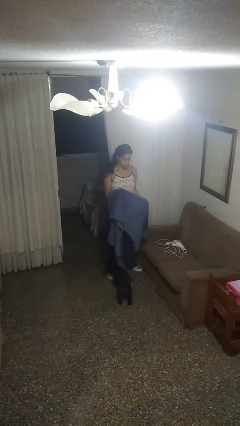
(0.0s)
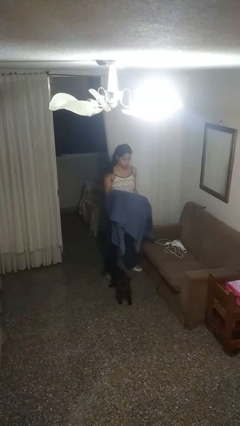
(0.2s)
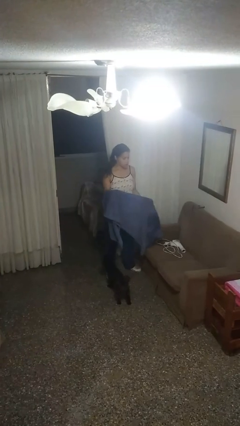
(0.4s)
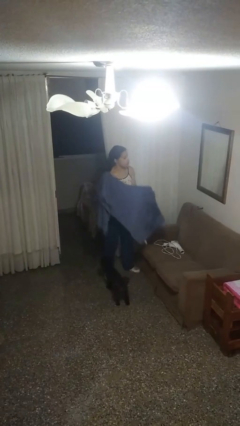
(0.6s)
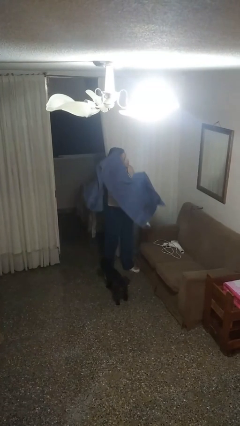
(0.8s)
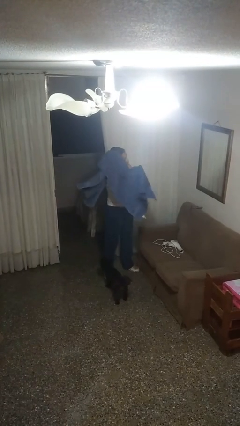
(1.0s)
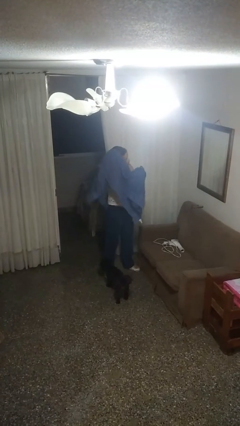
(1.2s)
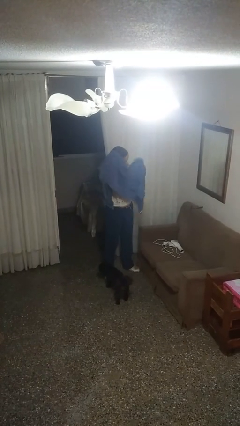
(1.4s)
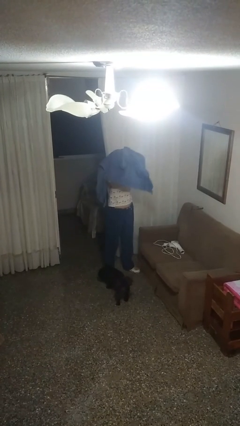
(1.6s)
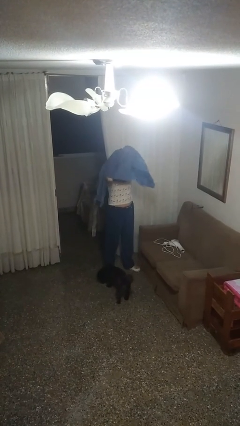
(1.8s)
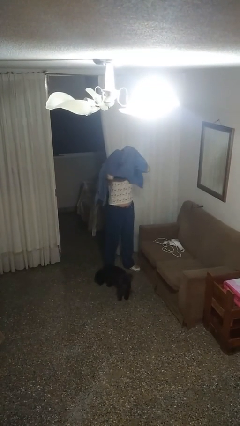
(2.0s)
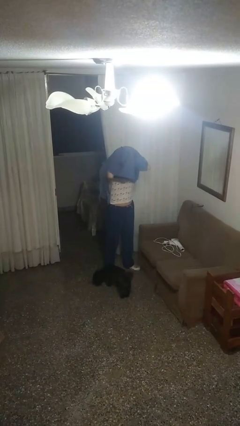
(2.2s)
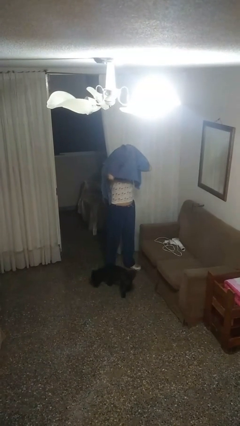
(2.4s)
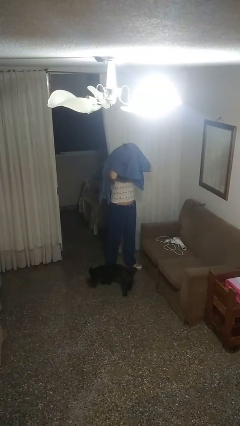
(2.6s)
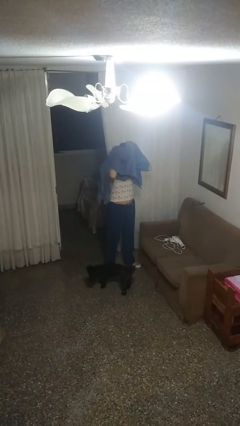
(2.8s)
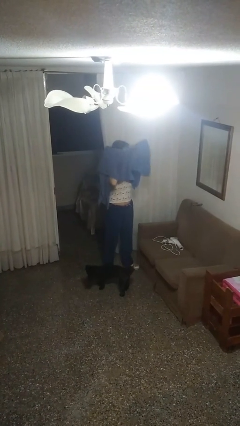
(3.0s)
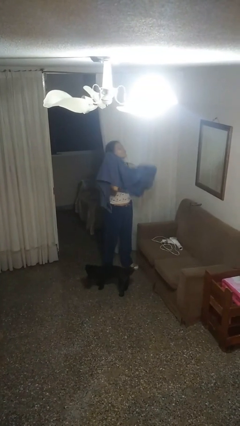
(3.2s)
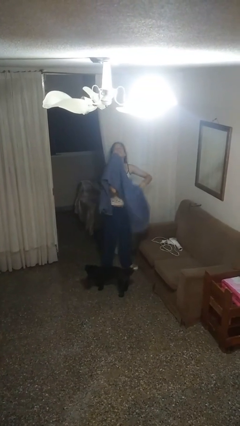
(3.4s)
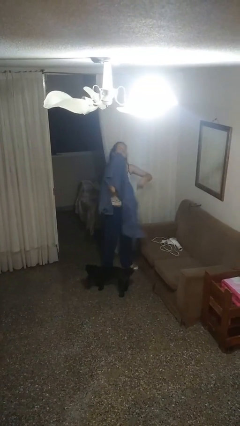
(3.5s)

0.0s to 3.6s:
person dries hair with towel

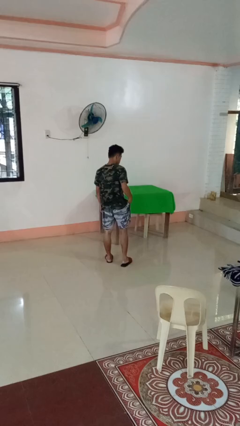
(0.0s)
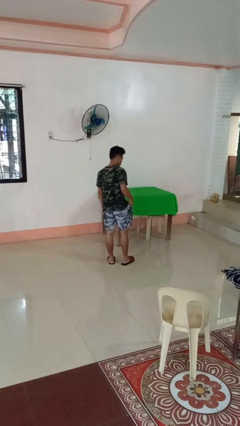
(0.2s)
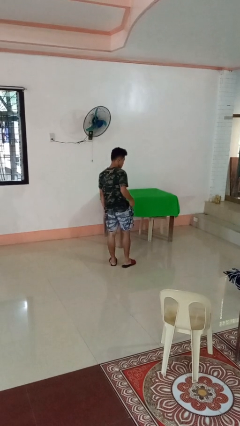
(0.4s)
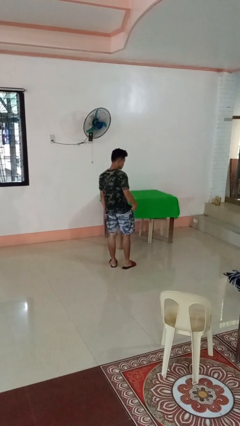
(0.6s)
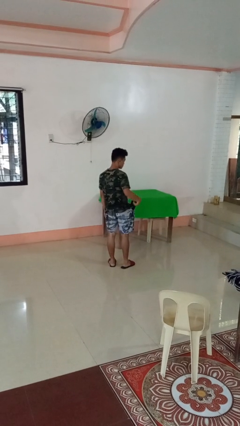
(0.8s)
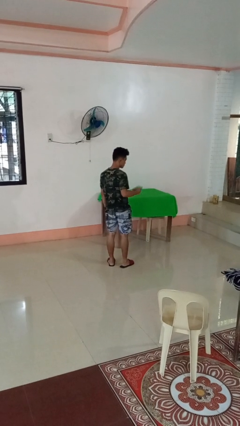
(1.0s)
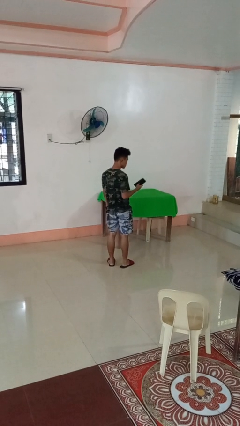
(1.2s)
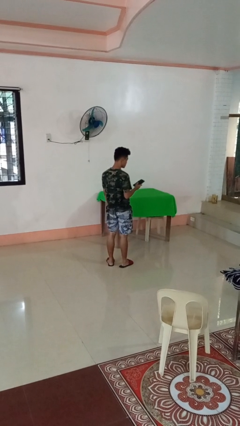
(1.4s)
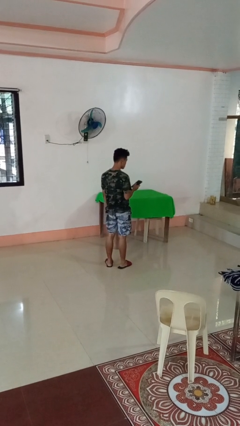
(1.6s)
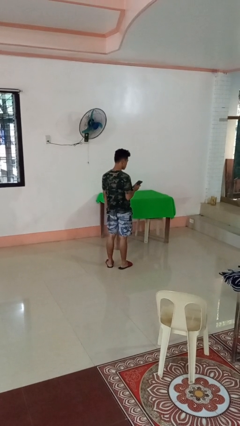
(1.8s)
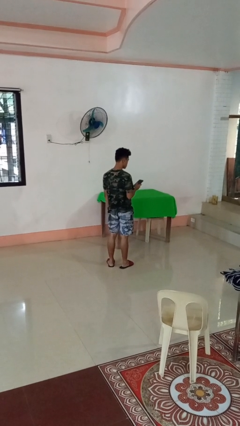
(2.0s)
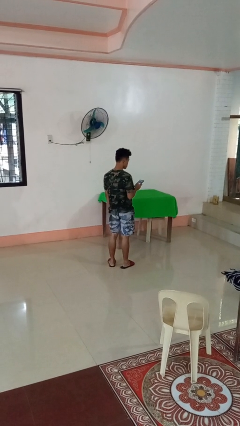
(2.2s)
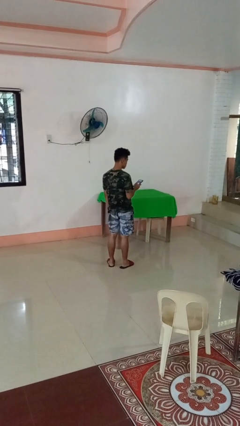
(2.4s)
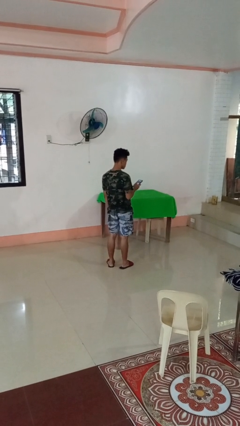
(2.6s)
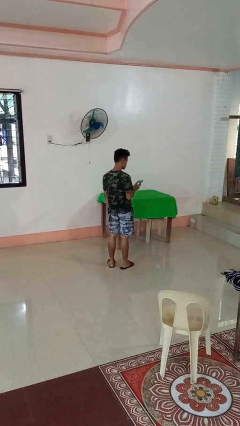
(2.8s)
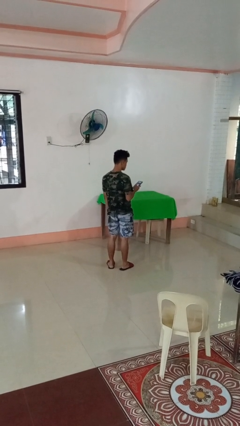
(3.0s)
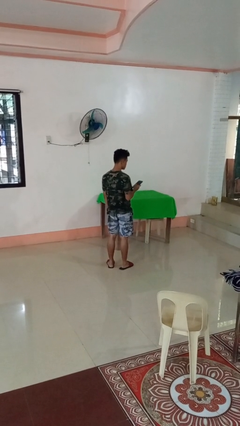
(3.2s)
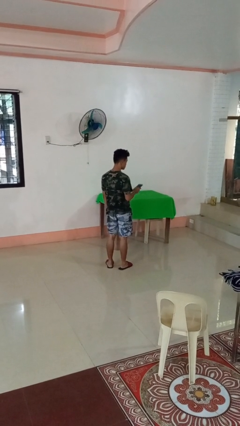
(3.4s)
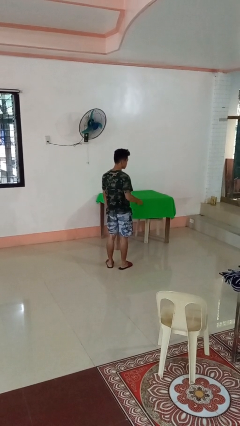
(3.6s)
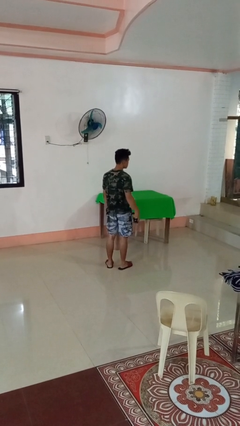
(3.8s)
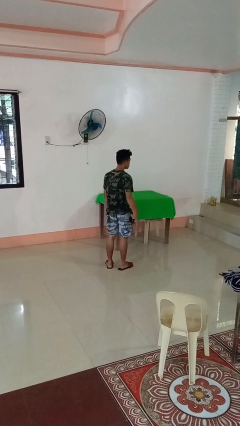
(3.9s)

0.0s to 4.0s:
person takes phone from pocket

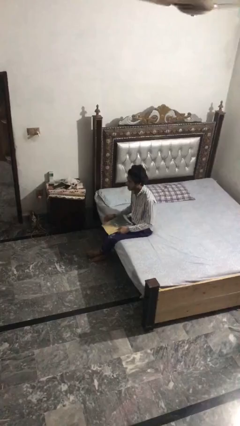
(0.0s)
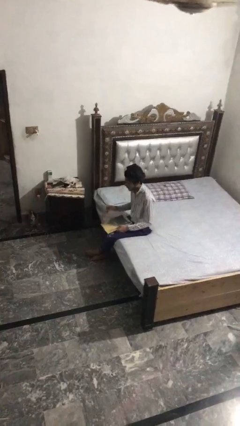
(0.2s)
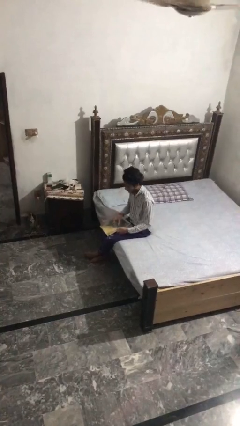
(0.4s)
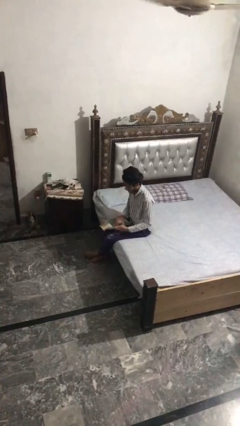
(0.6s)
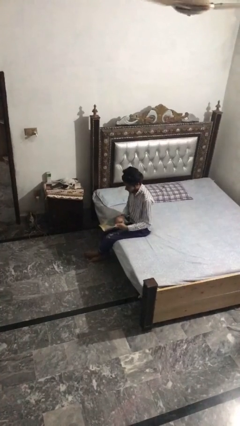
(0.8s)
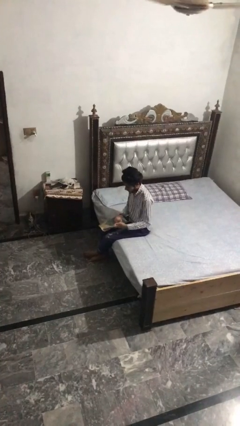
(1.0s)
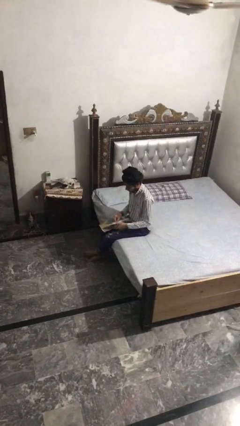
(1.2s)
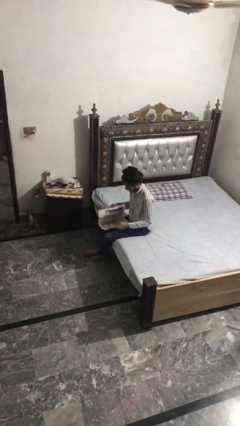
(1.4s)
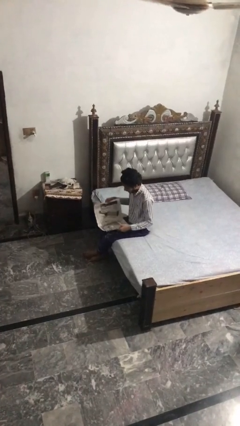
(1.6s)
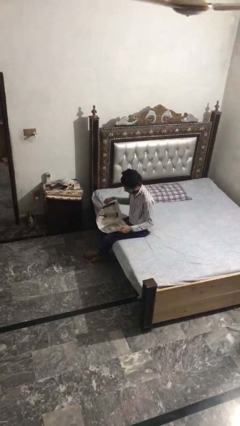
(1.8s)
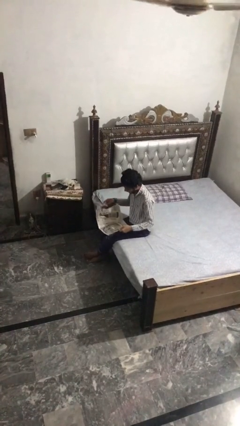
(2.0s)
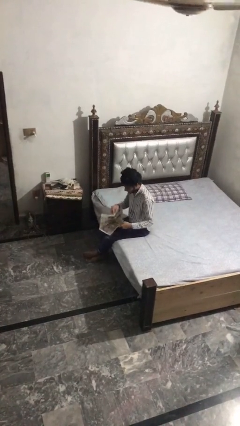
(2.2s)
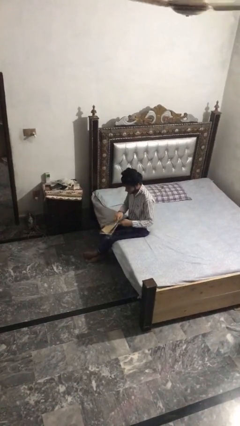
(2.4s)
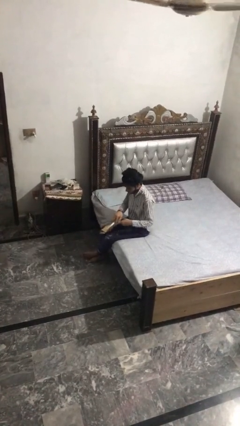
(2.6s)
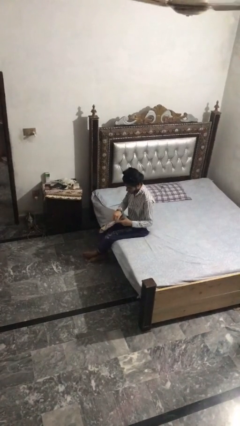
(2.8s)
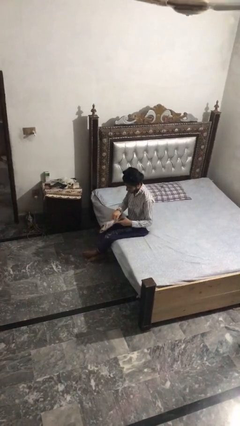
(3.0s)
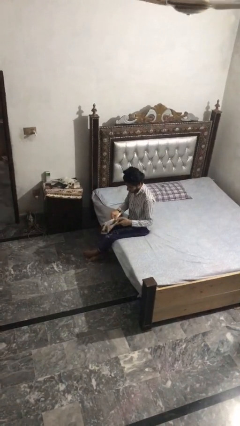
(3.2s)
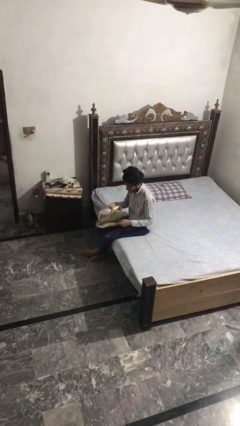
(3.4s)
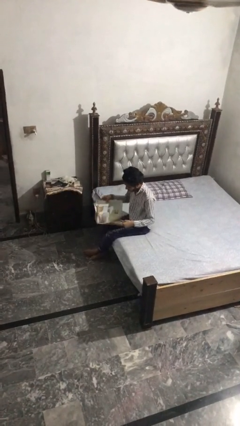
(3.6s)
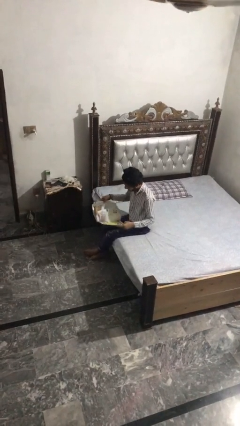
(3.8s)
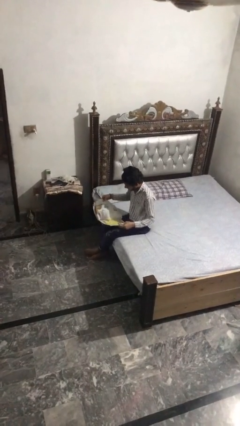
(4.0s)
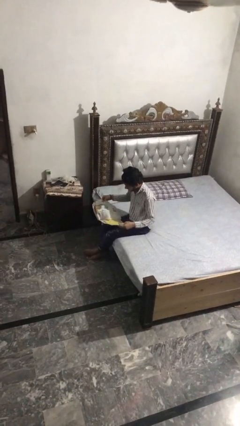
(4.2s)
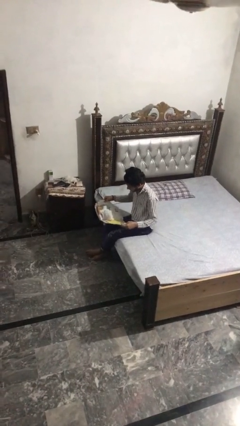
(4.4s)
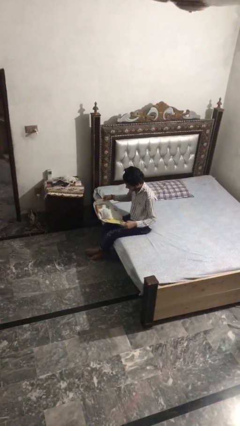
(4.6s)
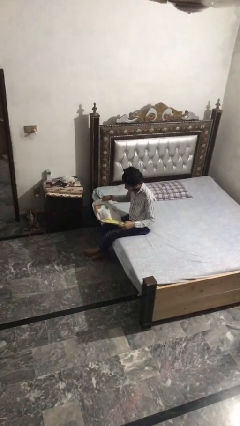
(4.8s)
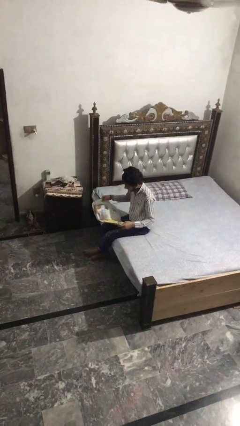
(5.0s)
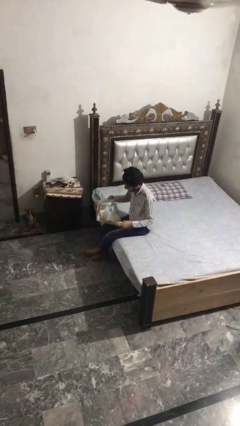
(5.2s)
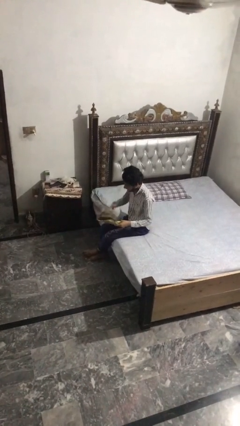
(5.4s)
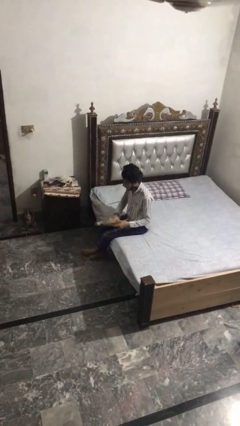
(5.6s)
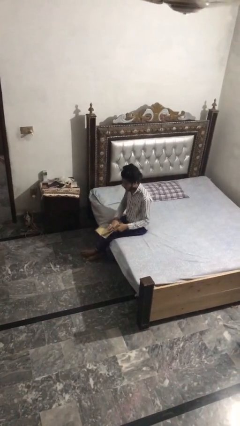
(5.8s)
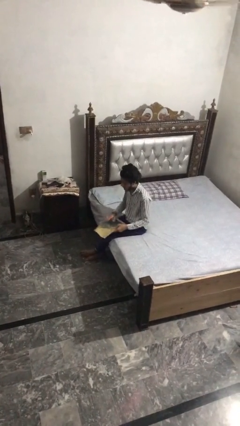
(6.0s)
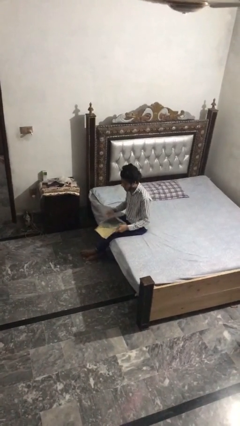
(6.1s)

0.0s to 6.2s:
person reads magazine

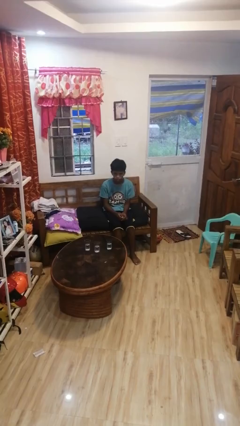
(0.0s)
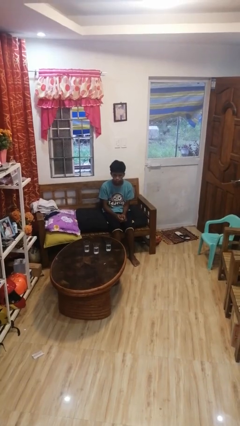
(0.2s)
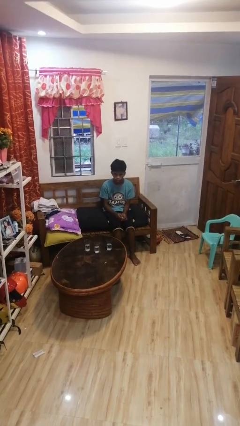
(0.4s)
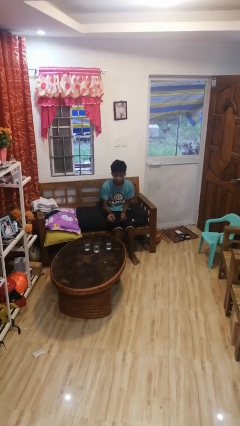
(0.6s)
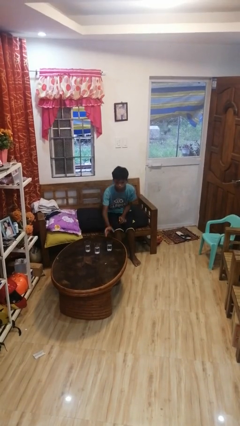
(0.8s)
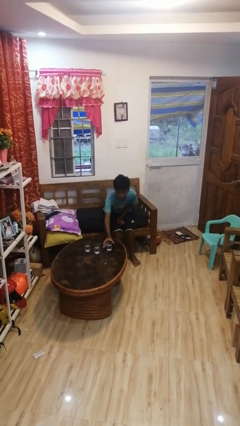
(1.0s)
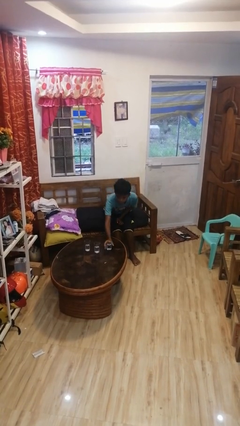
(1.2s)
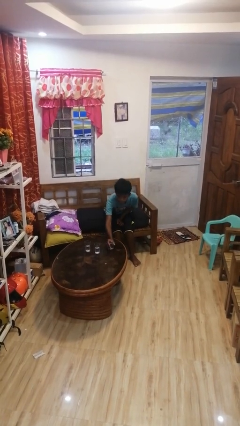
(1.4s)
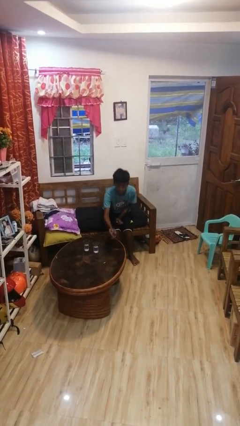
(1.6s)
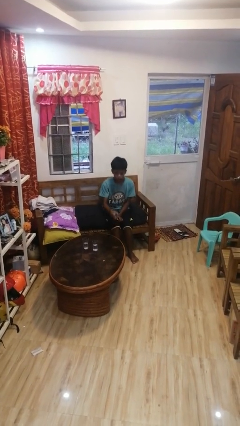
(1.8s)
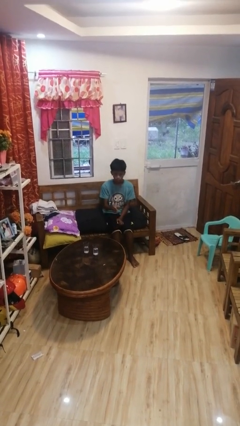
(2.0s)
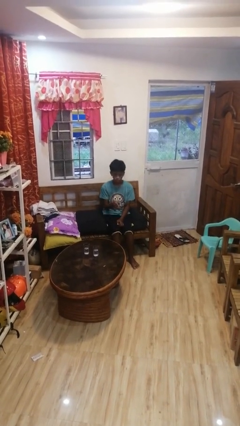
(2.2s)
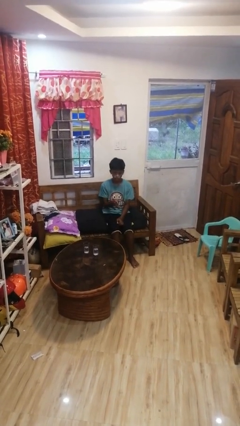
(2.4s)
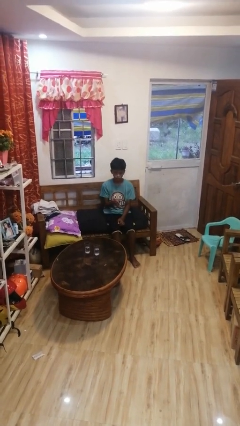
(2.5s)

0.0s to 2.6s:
person picks up object from table

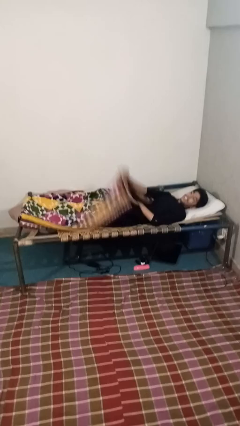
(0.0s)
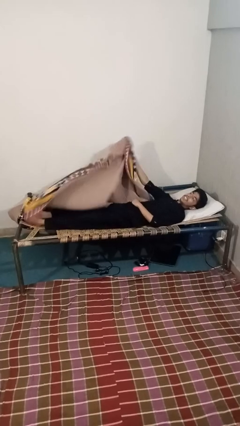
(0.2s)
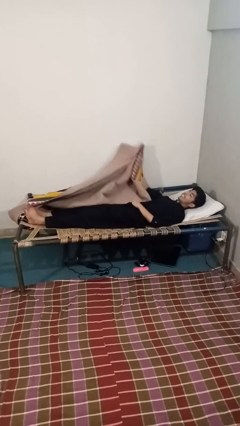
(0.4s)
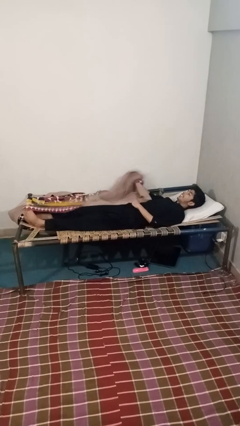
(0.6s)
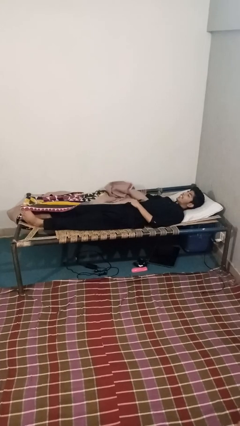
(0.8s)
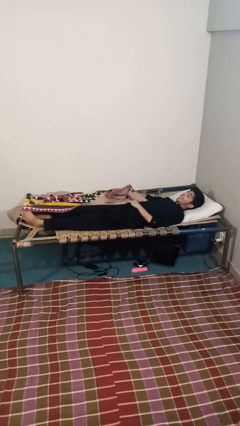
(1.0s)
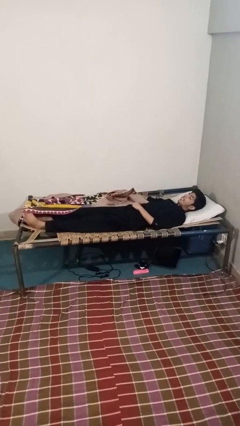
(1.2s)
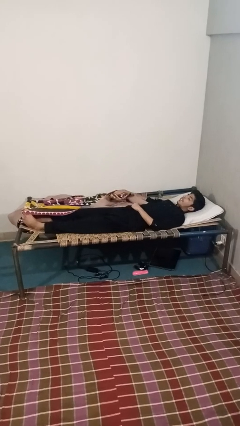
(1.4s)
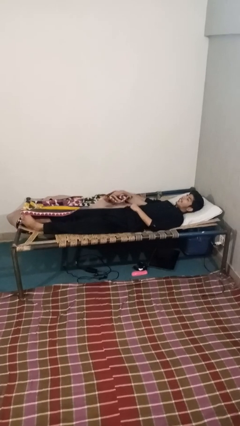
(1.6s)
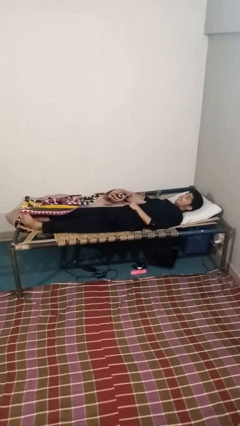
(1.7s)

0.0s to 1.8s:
person uncovers with bedsheets
